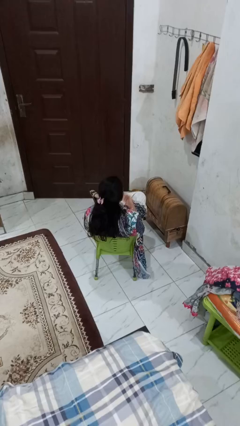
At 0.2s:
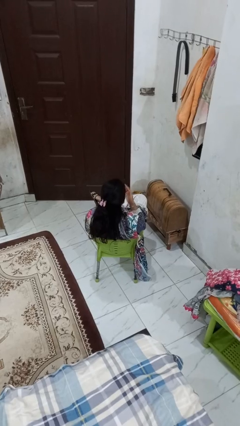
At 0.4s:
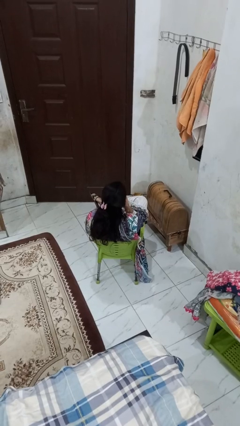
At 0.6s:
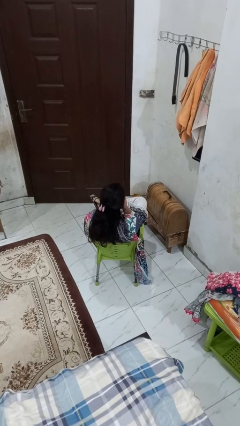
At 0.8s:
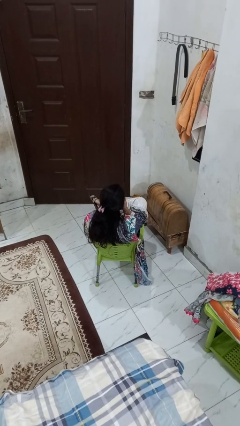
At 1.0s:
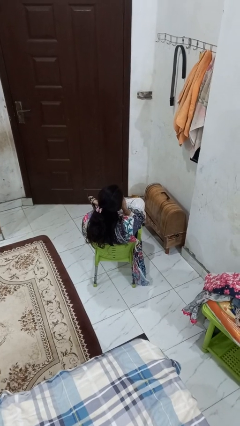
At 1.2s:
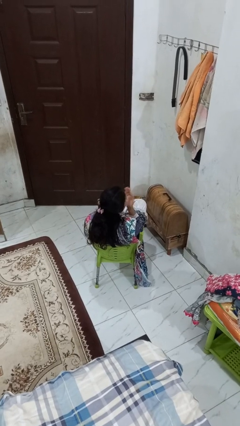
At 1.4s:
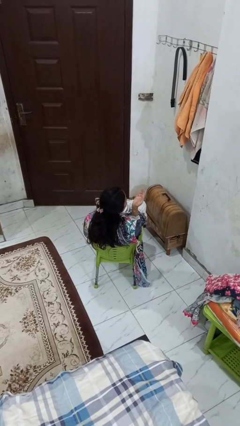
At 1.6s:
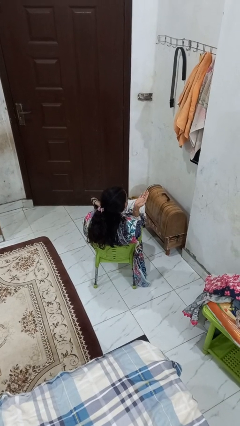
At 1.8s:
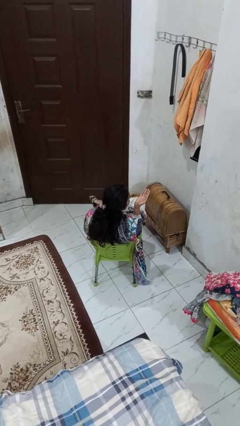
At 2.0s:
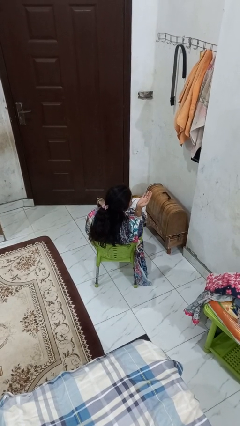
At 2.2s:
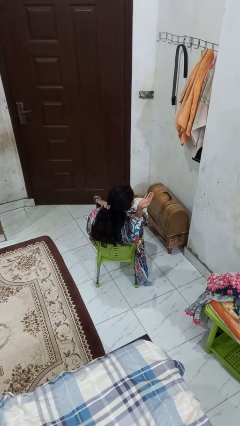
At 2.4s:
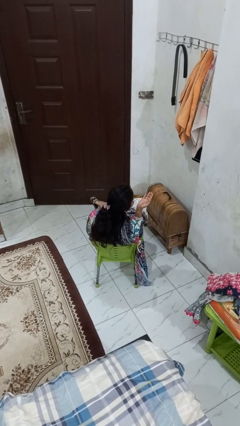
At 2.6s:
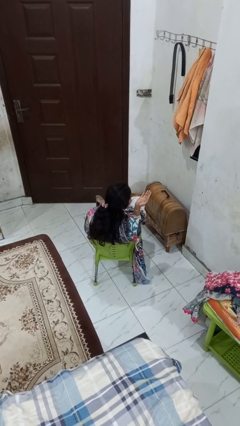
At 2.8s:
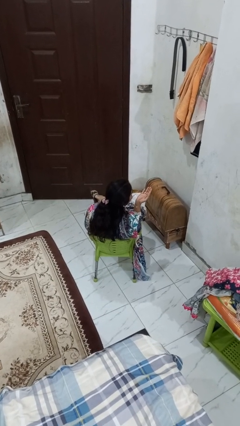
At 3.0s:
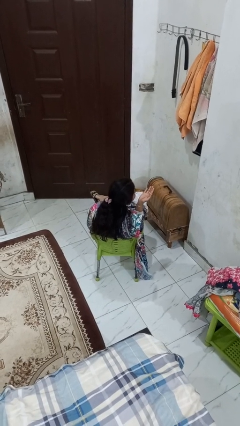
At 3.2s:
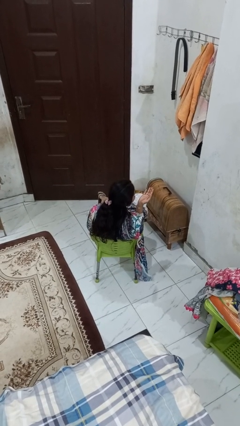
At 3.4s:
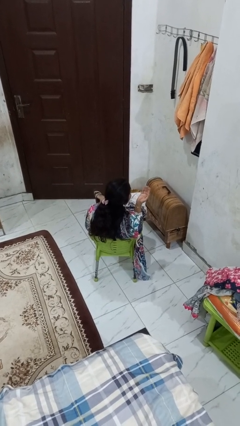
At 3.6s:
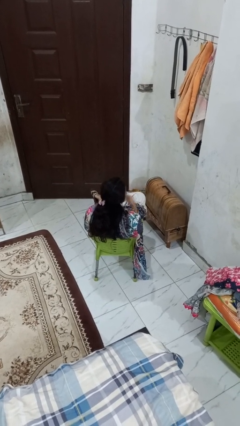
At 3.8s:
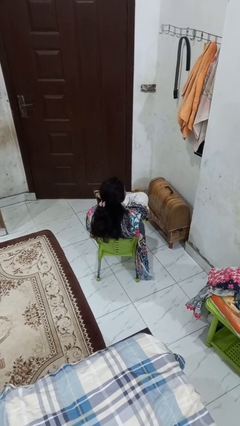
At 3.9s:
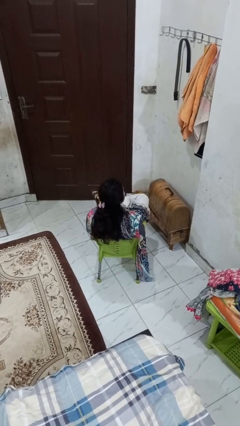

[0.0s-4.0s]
person gestures blow kiss

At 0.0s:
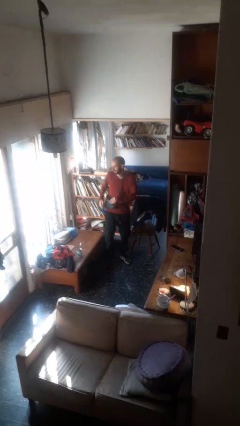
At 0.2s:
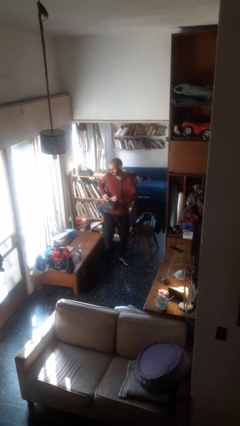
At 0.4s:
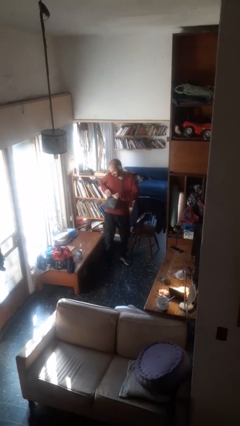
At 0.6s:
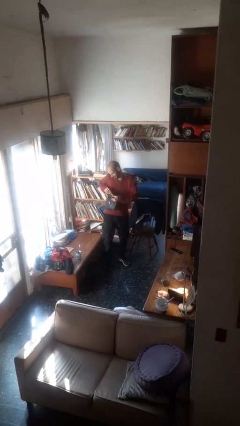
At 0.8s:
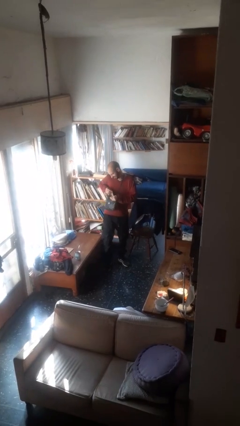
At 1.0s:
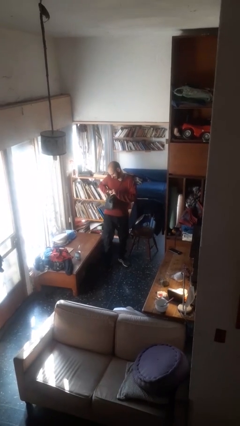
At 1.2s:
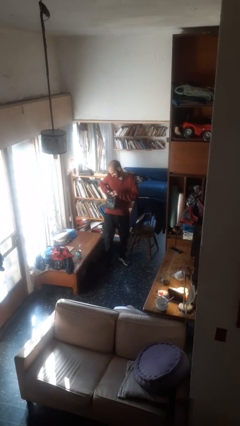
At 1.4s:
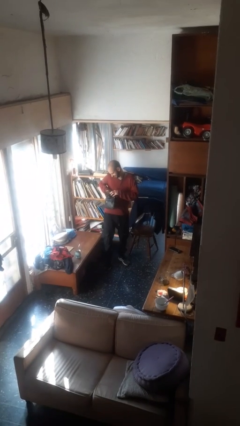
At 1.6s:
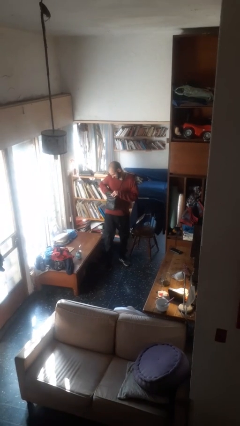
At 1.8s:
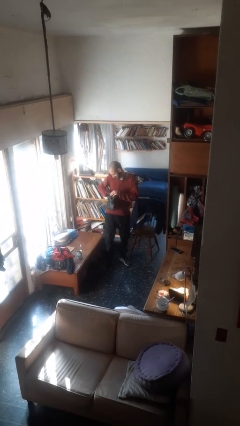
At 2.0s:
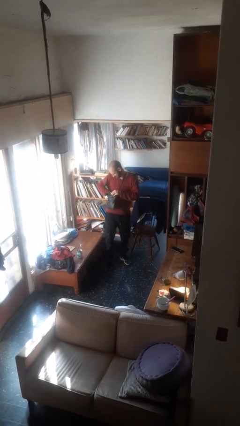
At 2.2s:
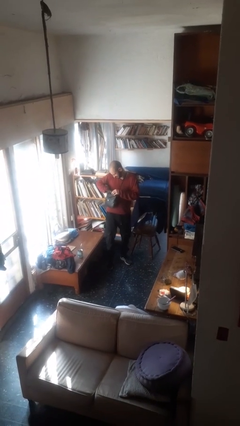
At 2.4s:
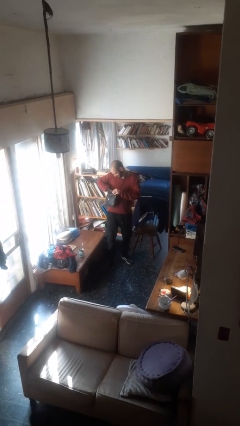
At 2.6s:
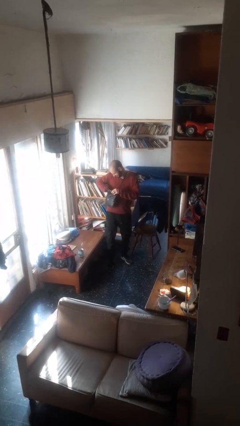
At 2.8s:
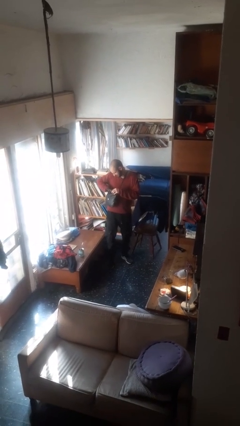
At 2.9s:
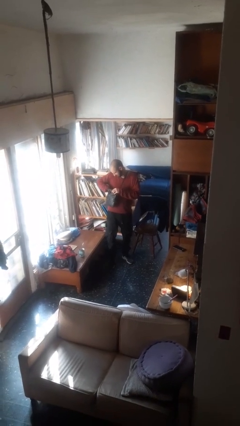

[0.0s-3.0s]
person searches in purse

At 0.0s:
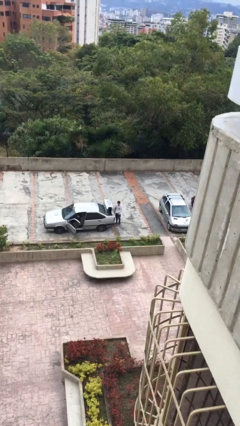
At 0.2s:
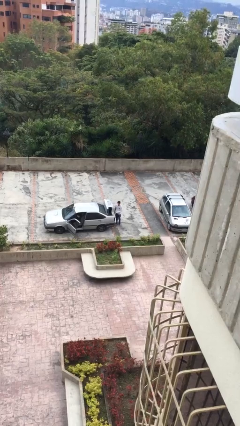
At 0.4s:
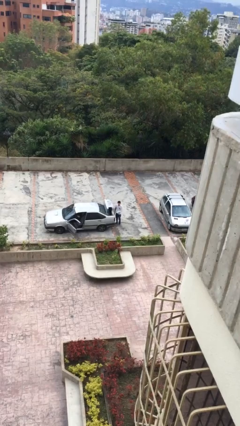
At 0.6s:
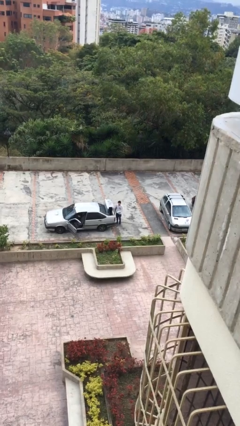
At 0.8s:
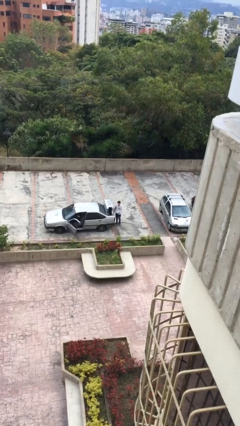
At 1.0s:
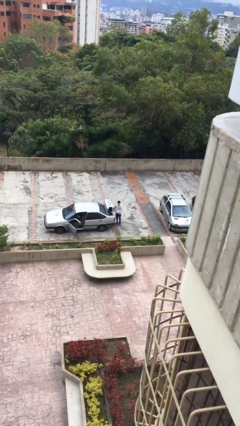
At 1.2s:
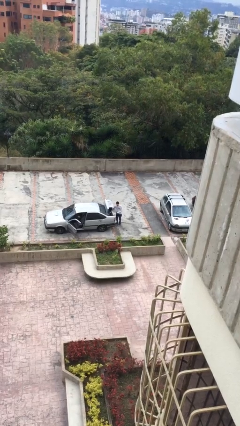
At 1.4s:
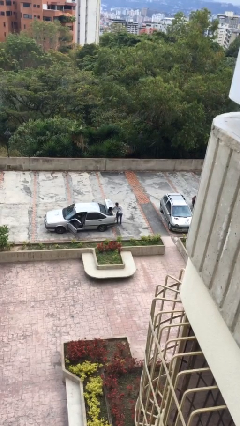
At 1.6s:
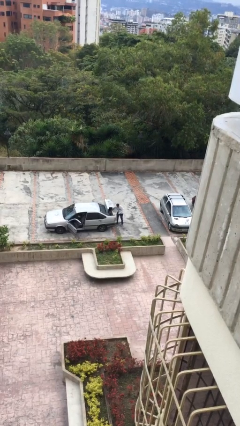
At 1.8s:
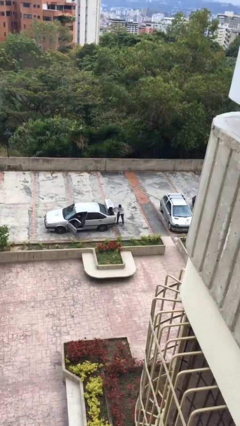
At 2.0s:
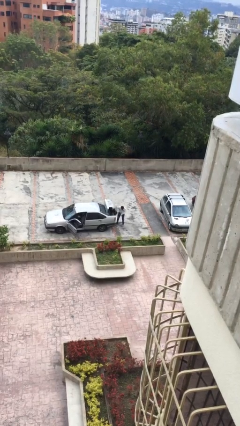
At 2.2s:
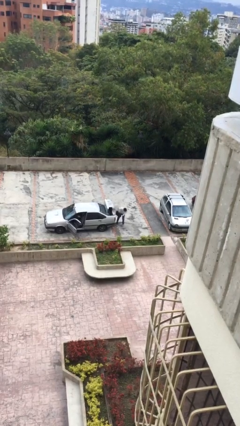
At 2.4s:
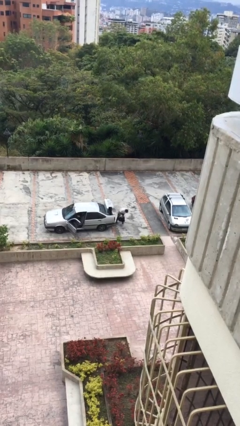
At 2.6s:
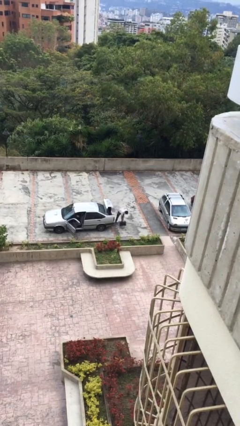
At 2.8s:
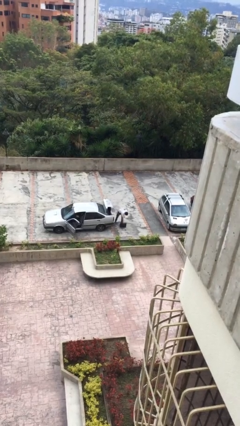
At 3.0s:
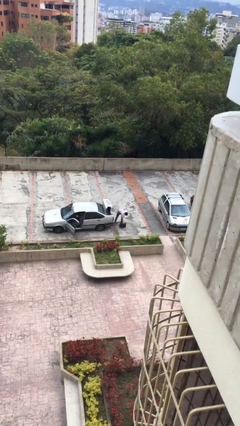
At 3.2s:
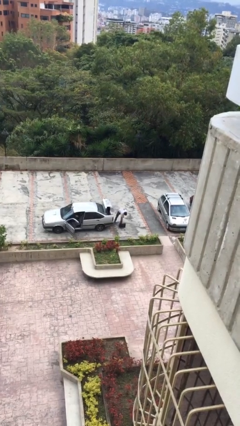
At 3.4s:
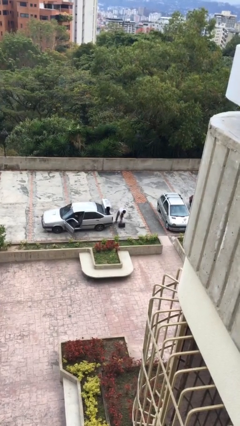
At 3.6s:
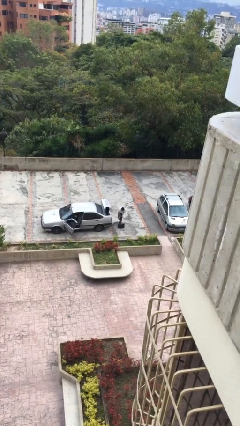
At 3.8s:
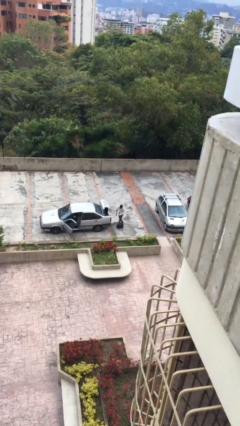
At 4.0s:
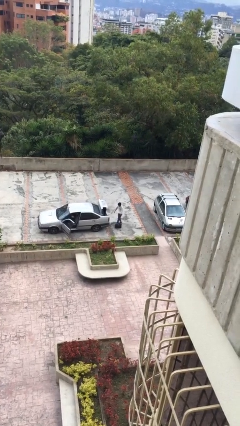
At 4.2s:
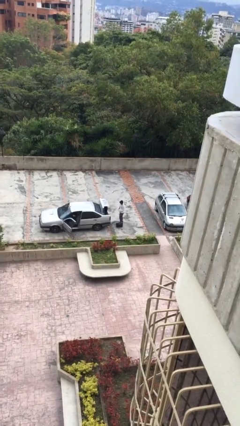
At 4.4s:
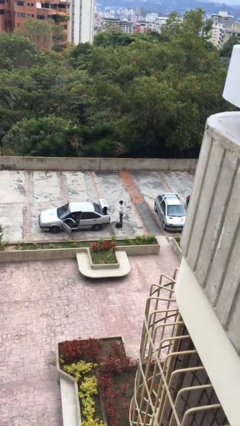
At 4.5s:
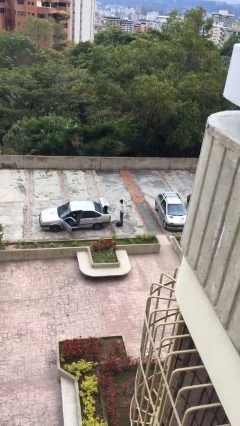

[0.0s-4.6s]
person unloads car

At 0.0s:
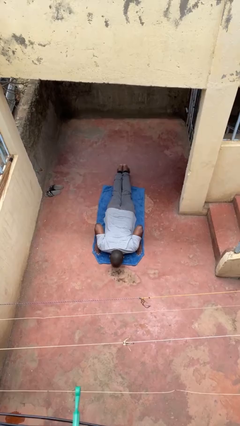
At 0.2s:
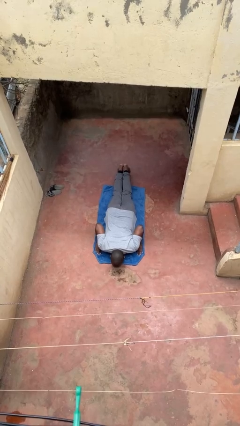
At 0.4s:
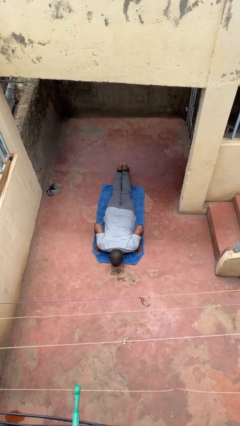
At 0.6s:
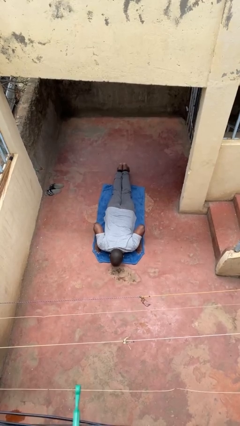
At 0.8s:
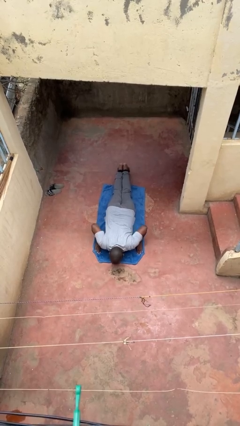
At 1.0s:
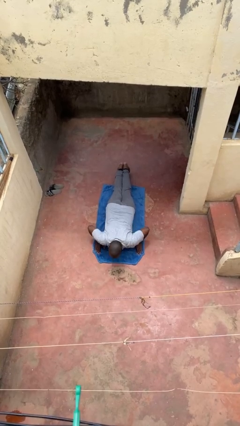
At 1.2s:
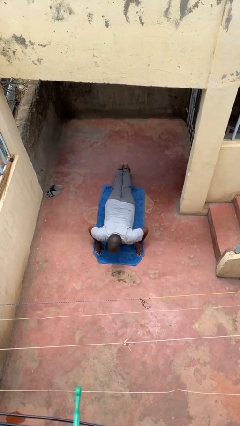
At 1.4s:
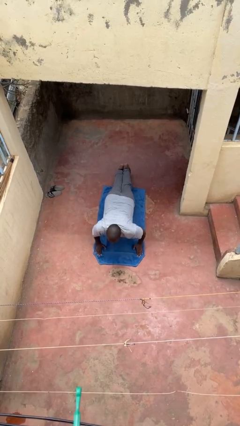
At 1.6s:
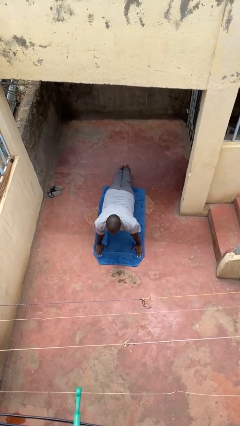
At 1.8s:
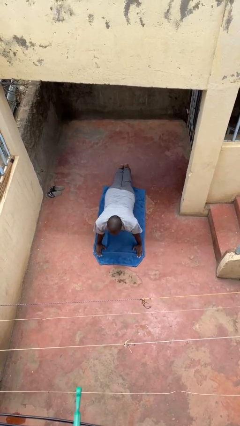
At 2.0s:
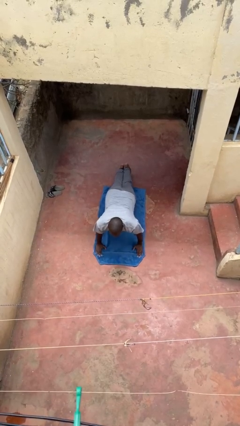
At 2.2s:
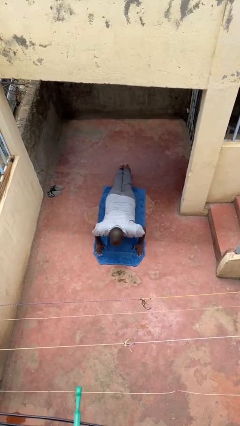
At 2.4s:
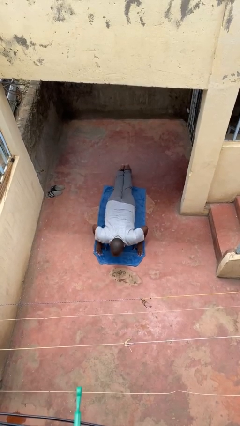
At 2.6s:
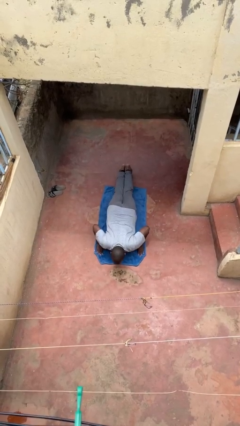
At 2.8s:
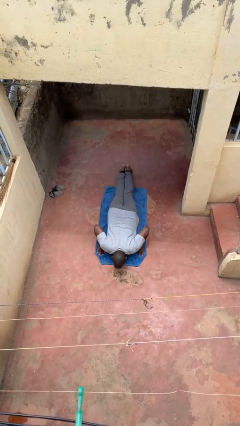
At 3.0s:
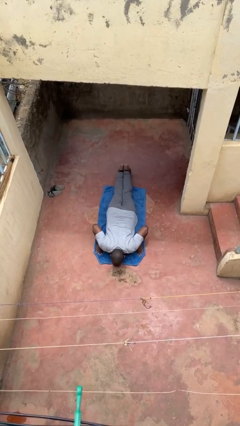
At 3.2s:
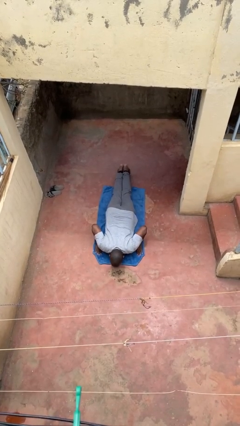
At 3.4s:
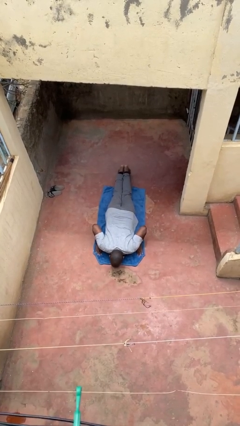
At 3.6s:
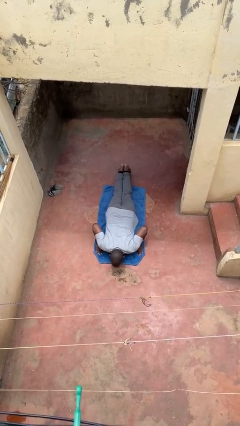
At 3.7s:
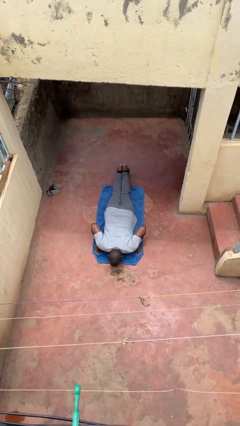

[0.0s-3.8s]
person exercises with pushup

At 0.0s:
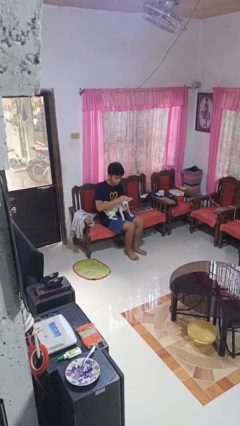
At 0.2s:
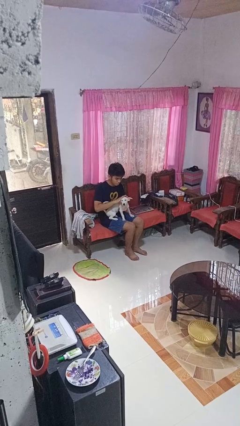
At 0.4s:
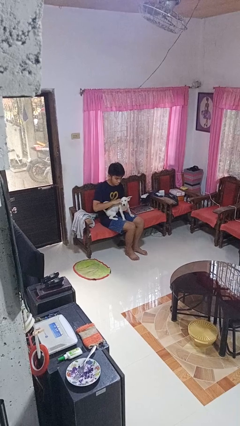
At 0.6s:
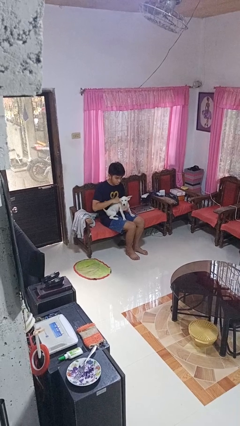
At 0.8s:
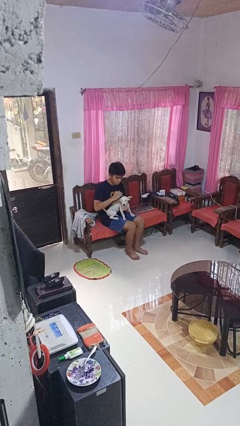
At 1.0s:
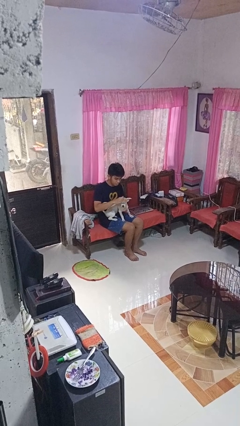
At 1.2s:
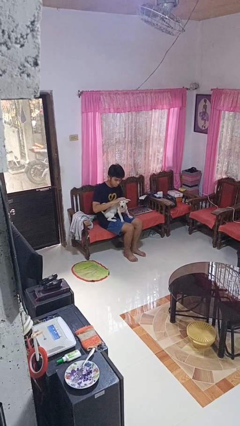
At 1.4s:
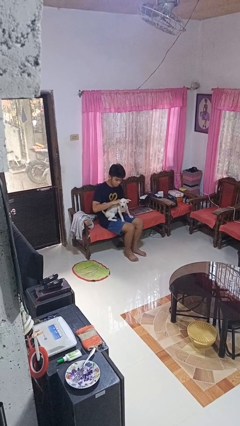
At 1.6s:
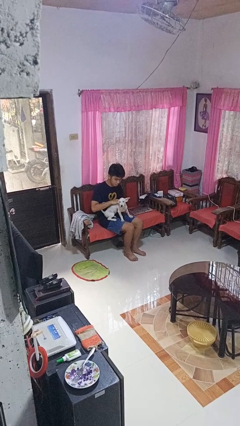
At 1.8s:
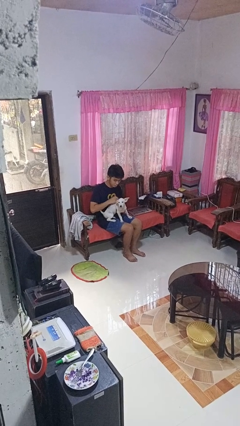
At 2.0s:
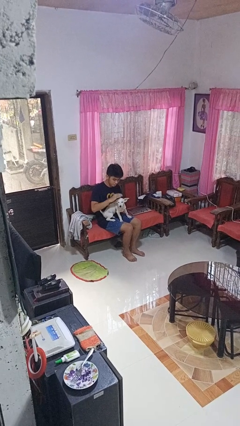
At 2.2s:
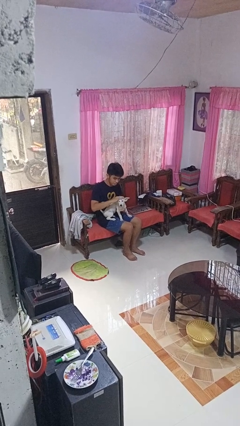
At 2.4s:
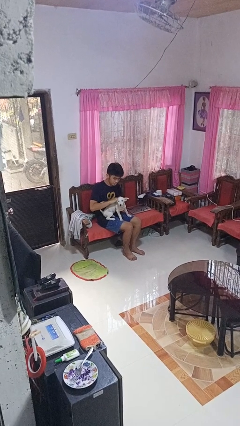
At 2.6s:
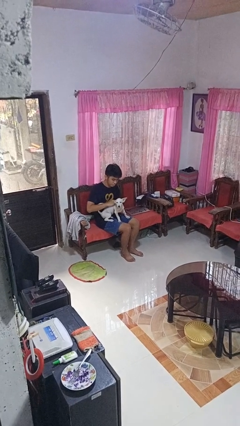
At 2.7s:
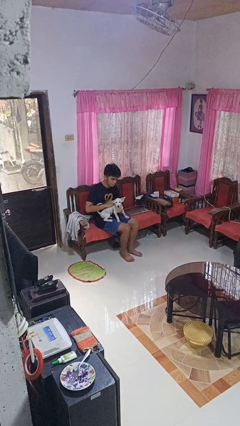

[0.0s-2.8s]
person pets dog
